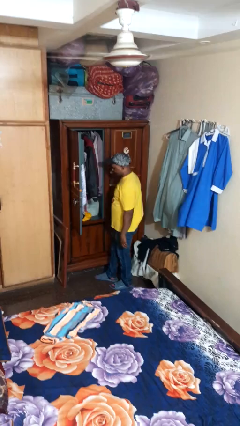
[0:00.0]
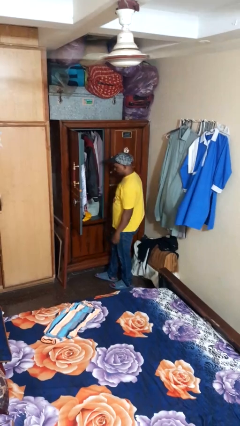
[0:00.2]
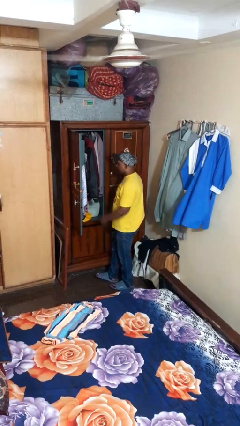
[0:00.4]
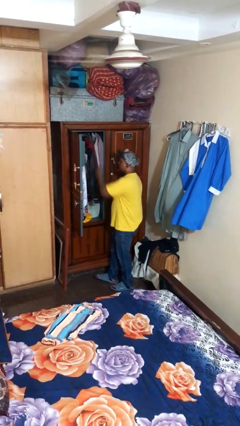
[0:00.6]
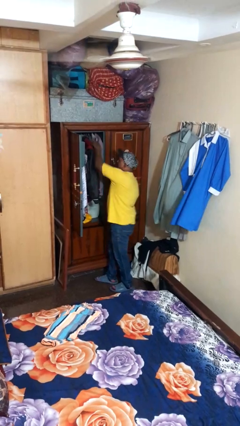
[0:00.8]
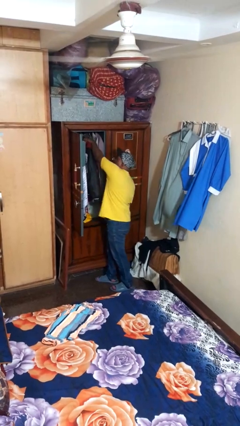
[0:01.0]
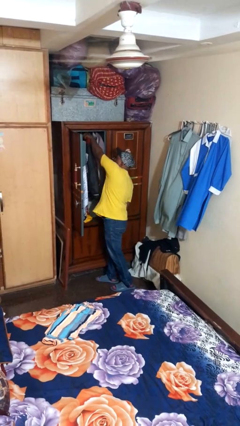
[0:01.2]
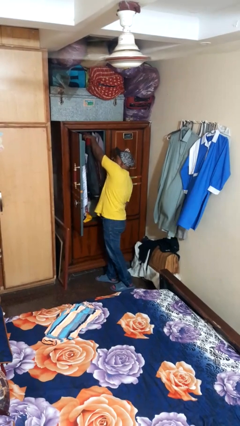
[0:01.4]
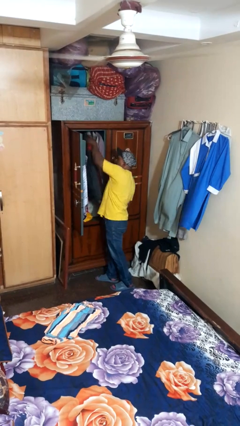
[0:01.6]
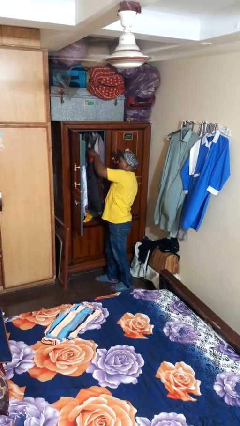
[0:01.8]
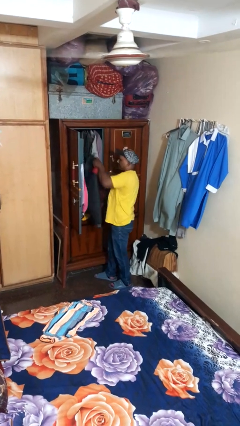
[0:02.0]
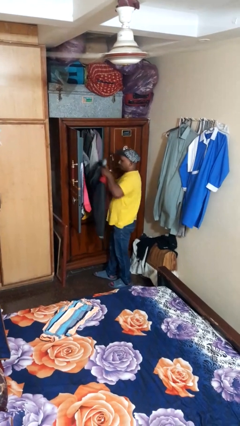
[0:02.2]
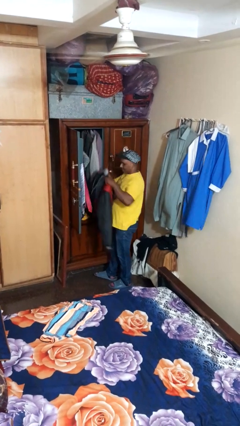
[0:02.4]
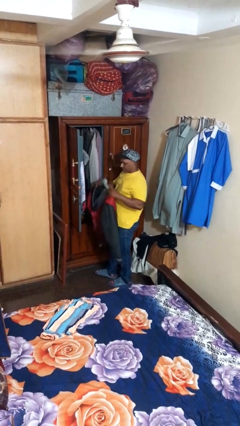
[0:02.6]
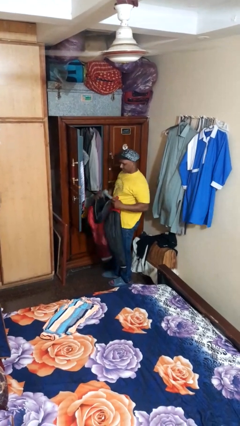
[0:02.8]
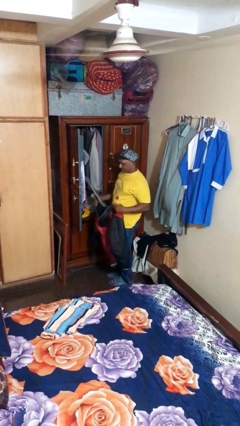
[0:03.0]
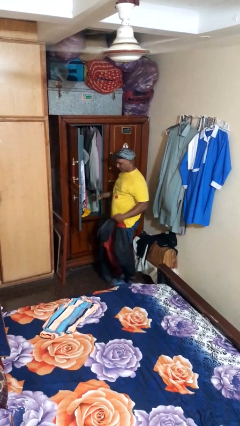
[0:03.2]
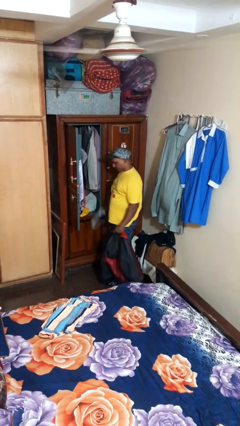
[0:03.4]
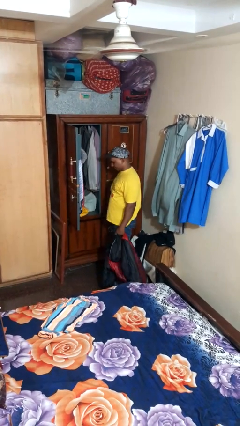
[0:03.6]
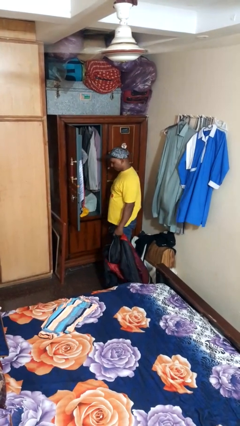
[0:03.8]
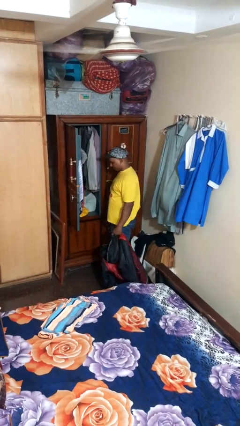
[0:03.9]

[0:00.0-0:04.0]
person takes clothes from closet

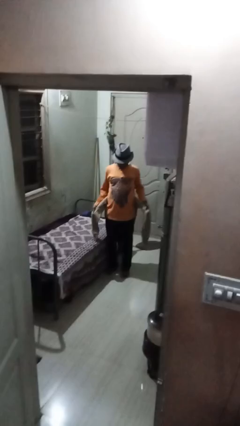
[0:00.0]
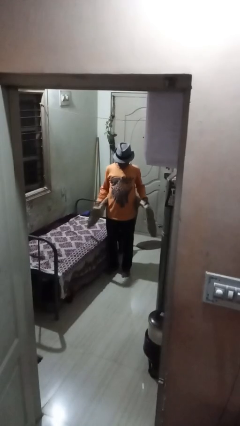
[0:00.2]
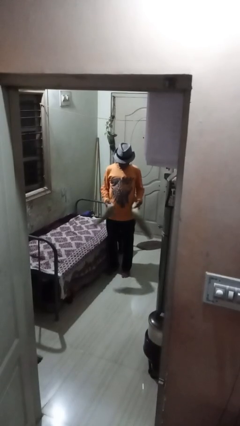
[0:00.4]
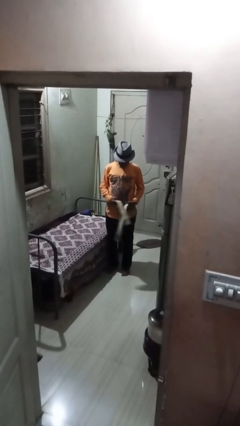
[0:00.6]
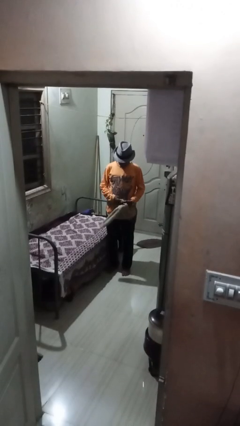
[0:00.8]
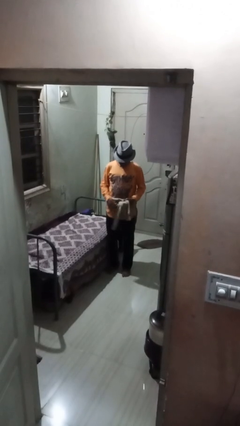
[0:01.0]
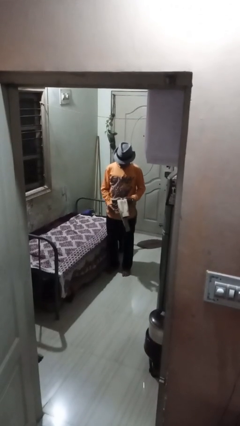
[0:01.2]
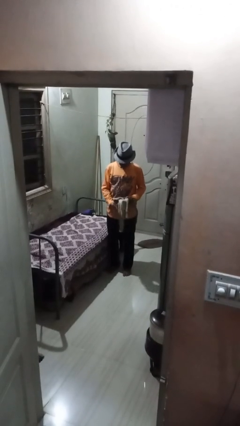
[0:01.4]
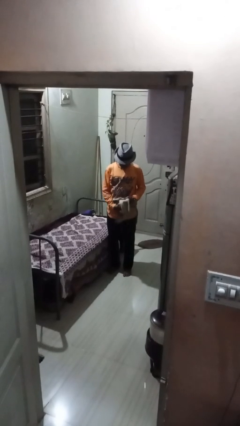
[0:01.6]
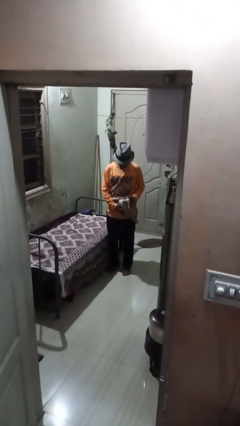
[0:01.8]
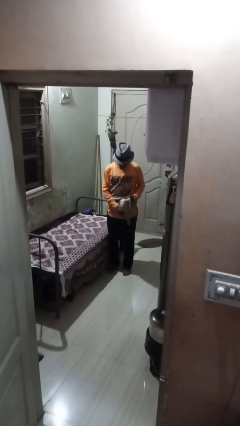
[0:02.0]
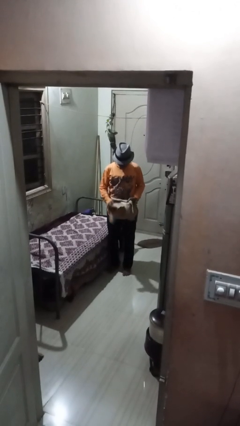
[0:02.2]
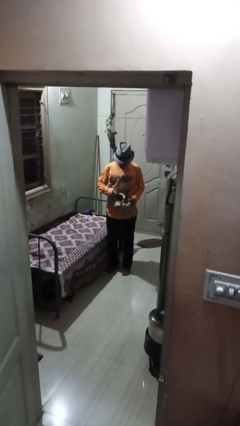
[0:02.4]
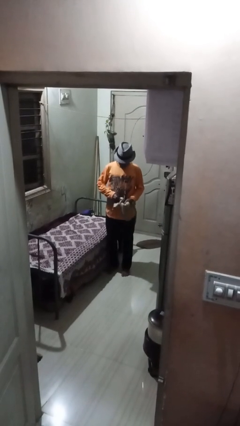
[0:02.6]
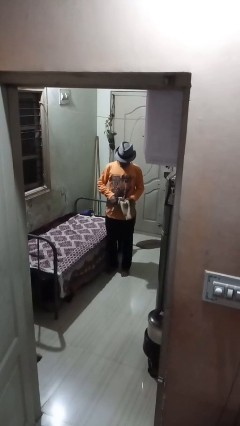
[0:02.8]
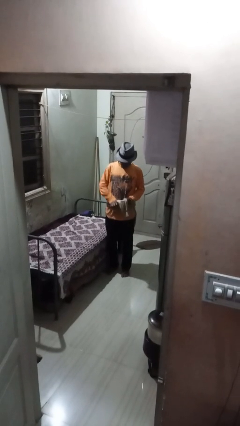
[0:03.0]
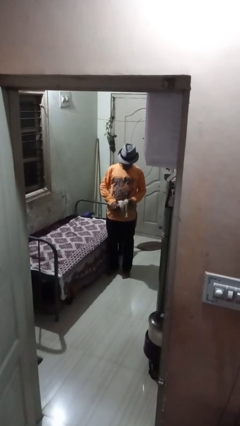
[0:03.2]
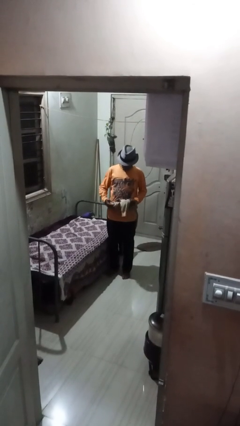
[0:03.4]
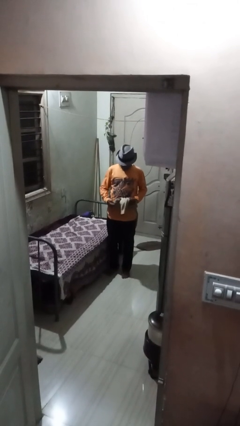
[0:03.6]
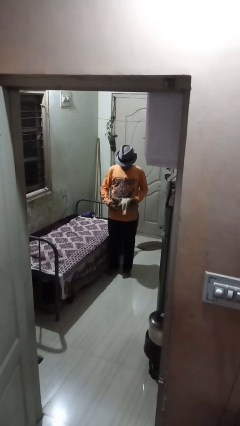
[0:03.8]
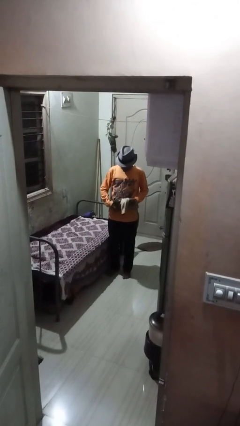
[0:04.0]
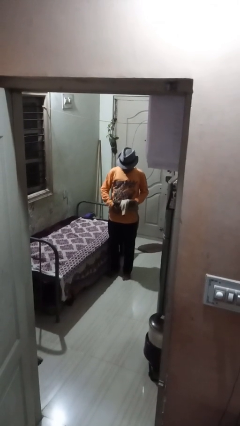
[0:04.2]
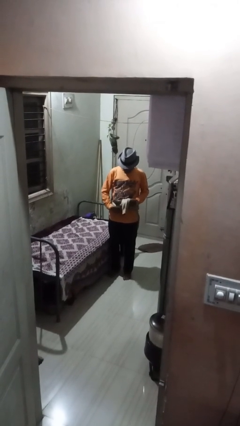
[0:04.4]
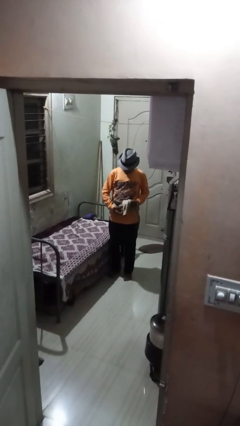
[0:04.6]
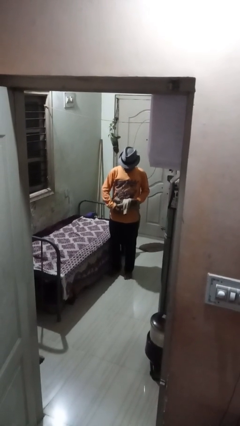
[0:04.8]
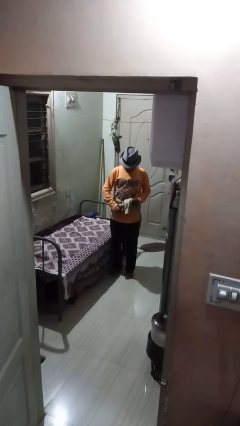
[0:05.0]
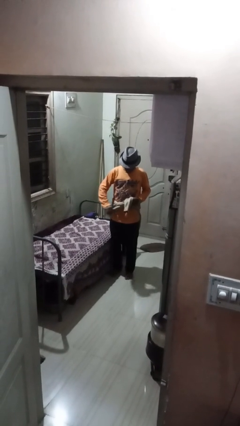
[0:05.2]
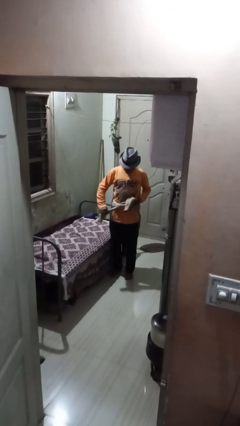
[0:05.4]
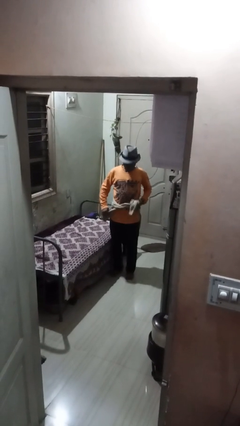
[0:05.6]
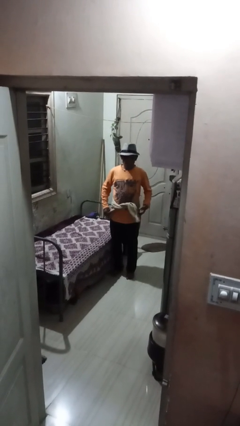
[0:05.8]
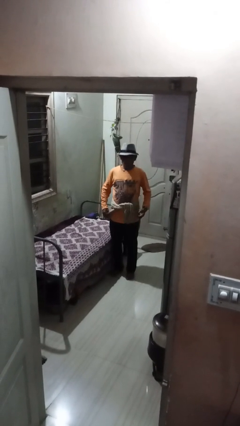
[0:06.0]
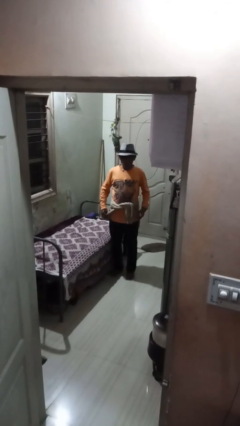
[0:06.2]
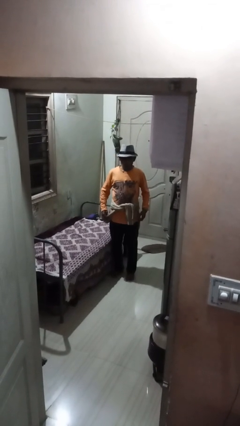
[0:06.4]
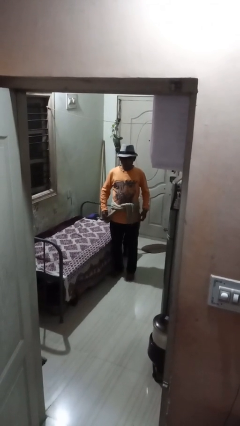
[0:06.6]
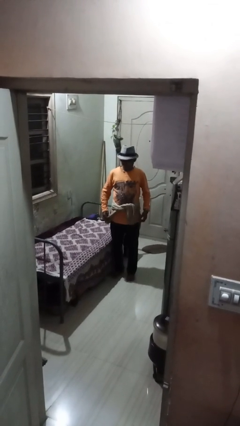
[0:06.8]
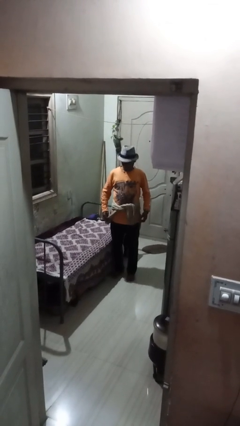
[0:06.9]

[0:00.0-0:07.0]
person ties jacket around waist

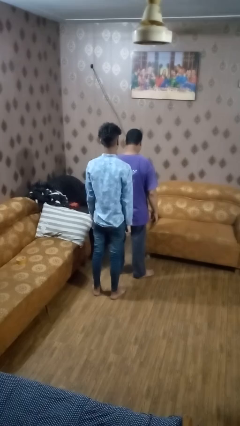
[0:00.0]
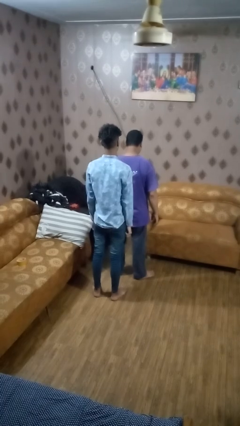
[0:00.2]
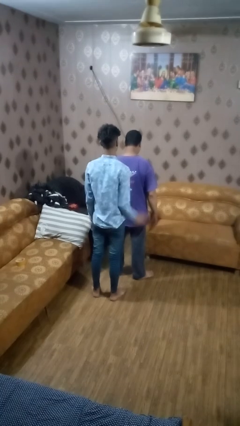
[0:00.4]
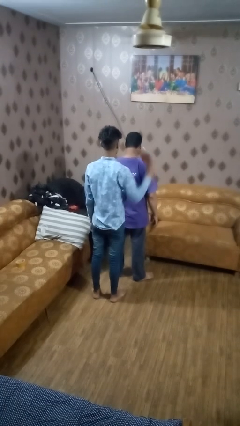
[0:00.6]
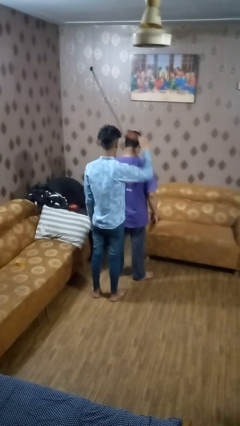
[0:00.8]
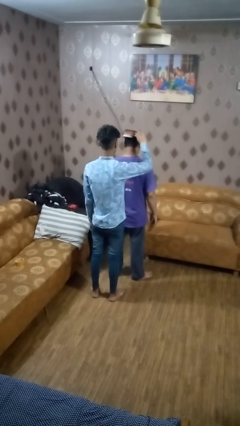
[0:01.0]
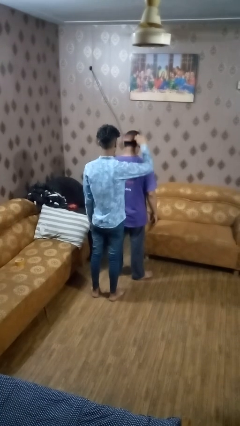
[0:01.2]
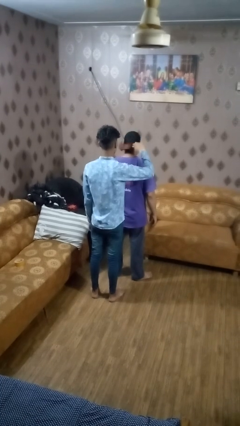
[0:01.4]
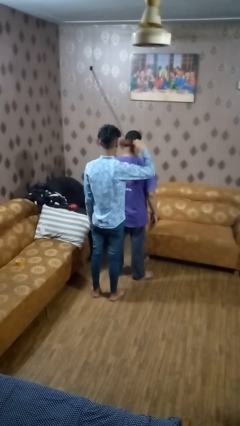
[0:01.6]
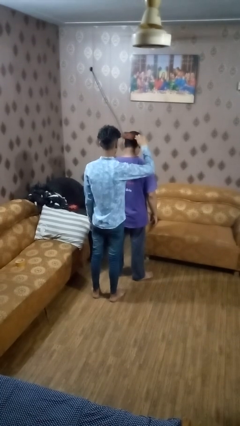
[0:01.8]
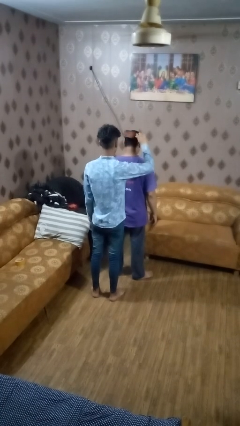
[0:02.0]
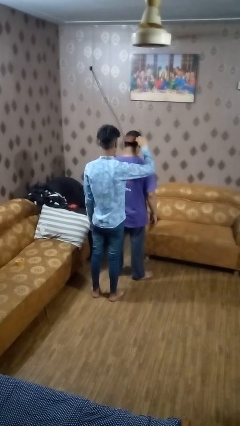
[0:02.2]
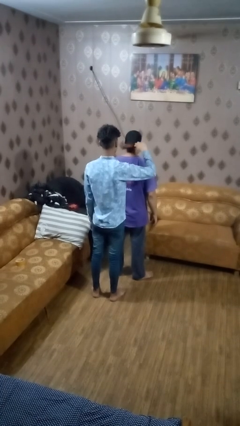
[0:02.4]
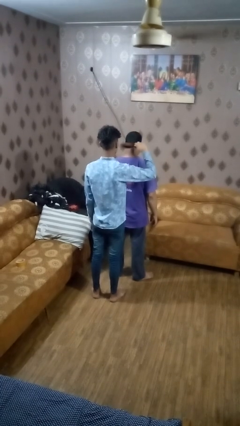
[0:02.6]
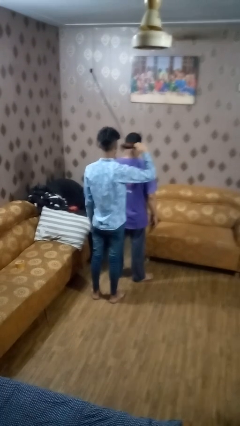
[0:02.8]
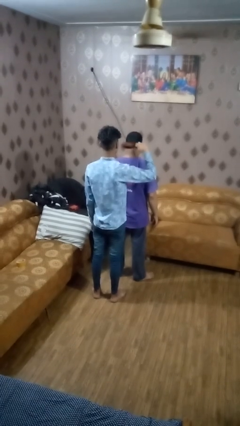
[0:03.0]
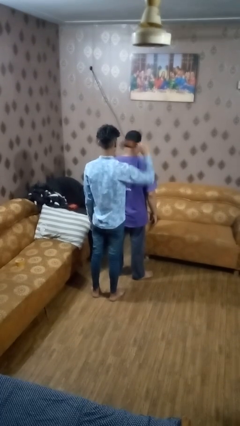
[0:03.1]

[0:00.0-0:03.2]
person brushes hair of person

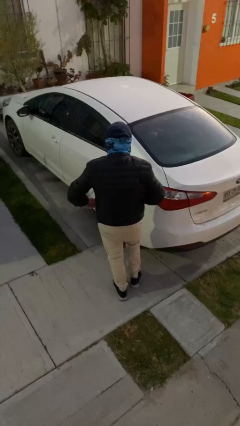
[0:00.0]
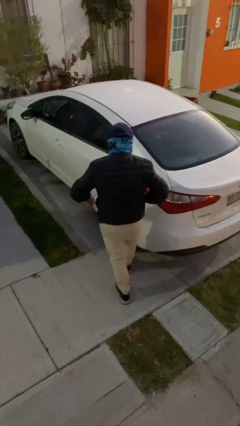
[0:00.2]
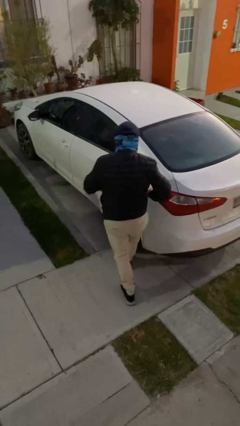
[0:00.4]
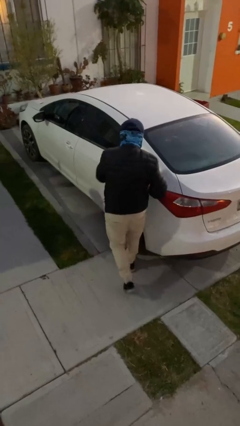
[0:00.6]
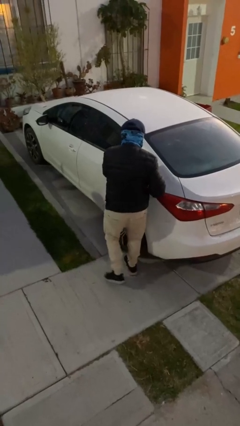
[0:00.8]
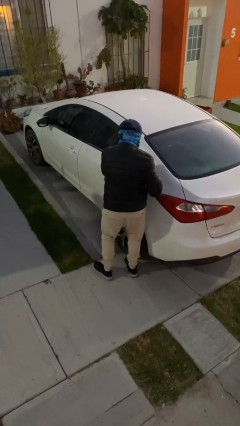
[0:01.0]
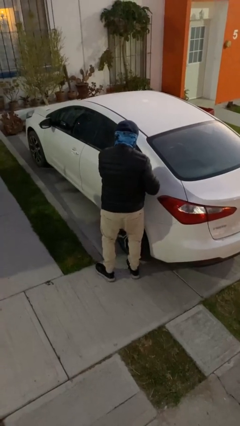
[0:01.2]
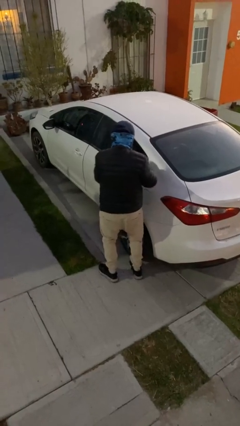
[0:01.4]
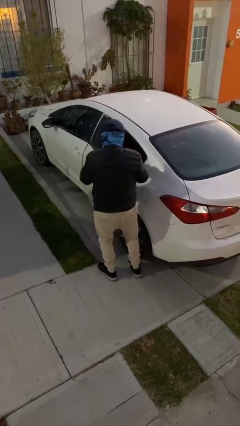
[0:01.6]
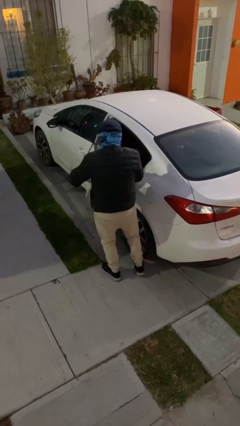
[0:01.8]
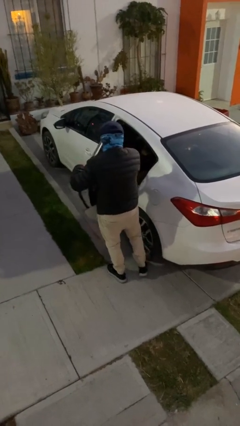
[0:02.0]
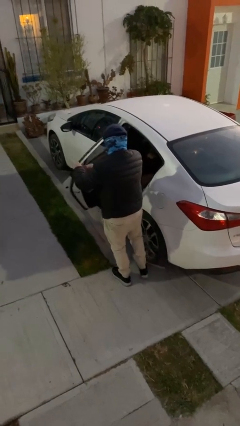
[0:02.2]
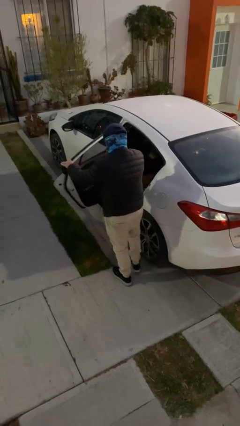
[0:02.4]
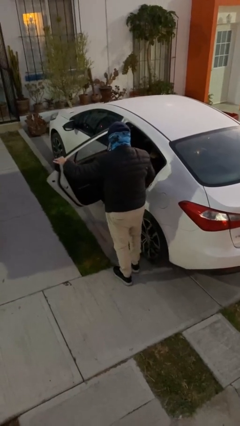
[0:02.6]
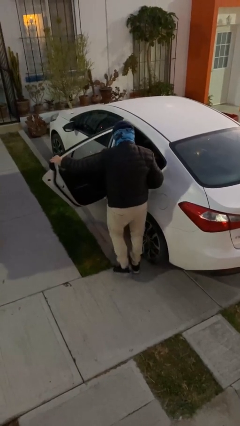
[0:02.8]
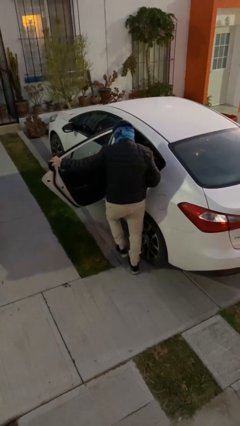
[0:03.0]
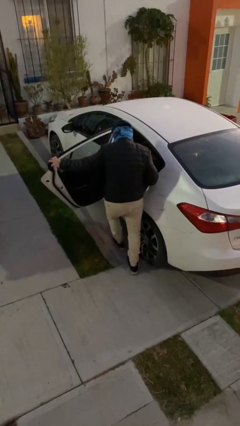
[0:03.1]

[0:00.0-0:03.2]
person opens car door

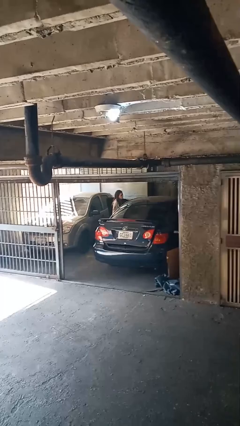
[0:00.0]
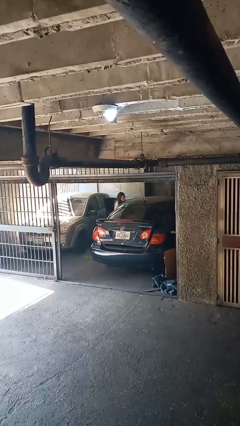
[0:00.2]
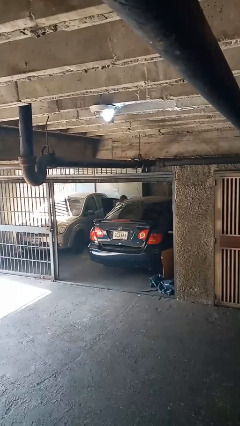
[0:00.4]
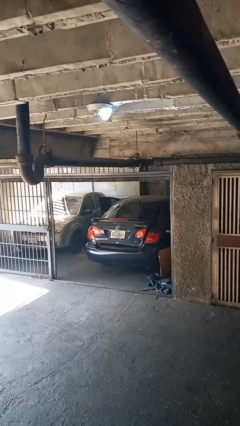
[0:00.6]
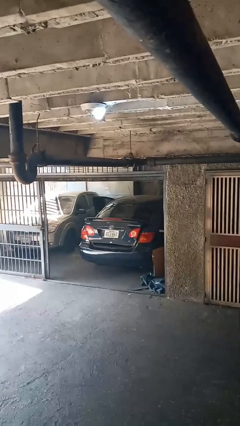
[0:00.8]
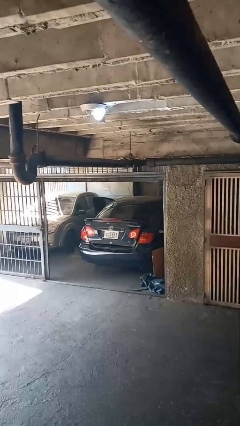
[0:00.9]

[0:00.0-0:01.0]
person loads car
